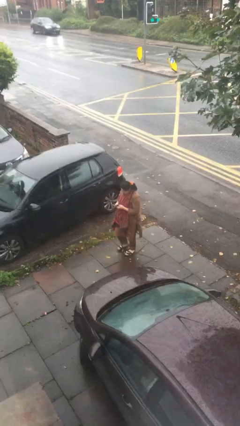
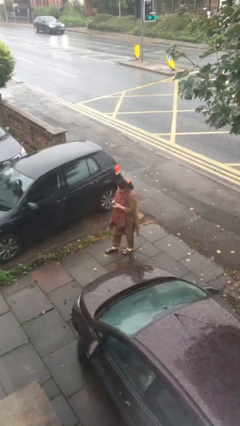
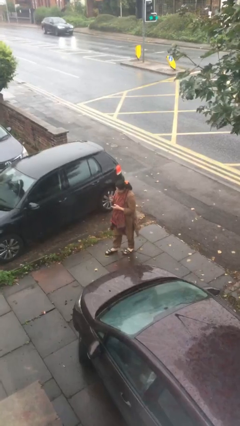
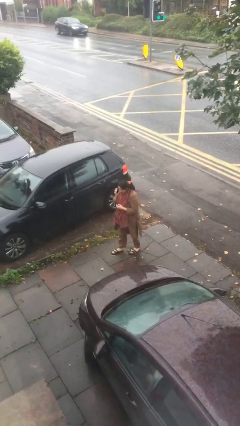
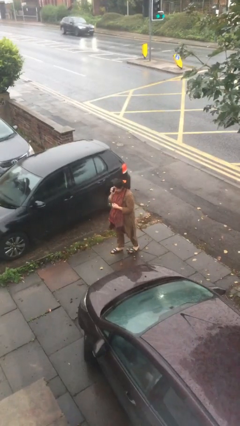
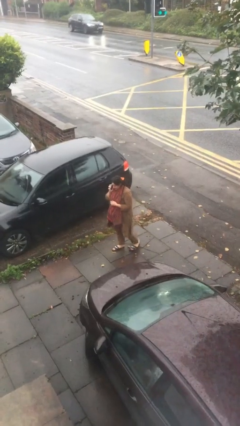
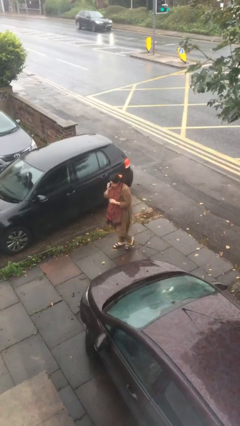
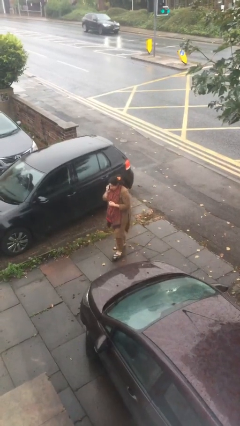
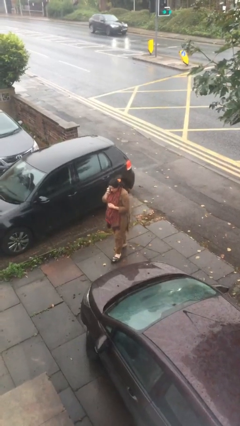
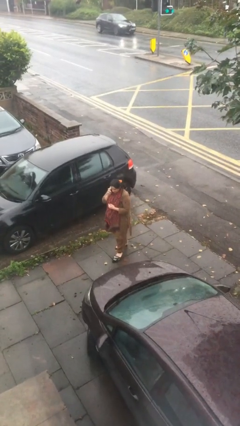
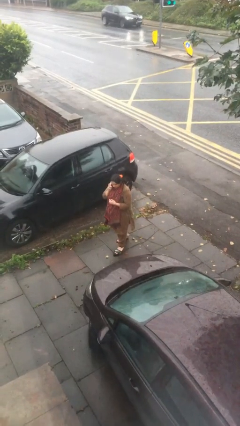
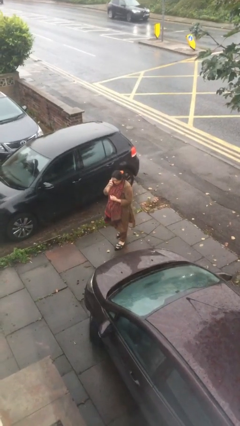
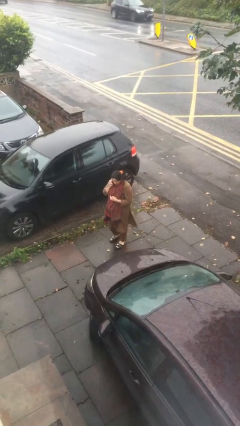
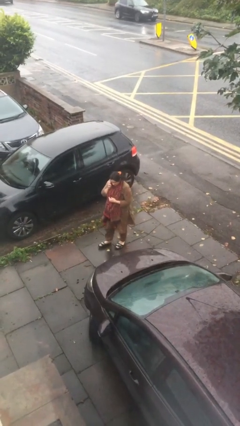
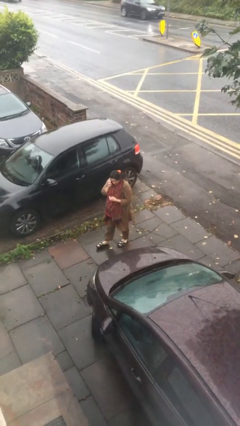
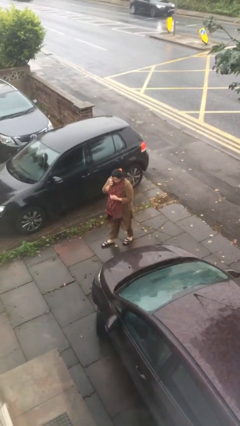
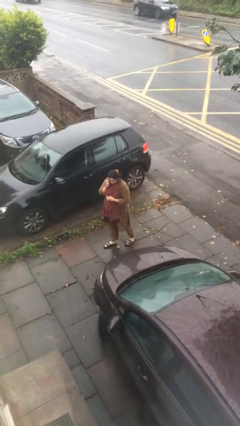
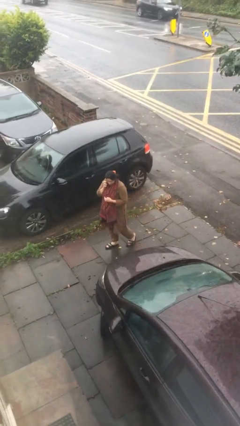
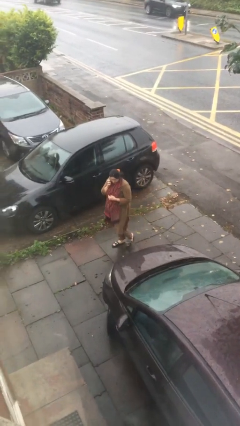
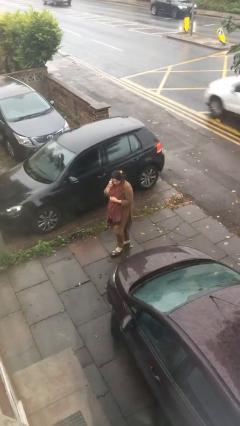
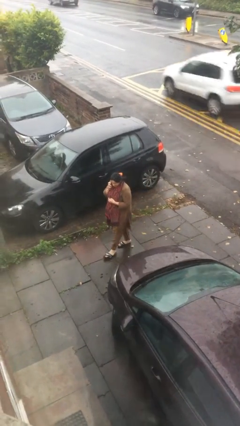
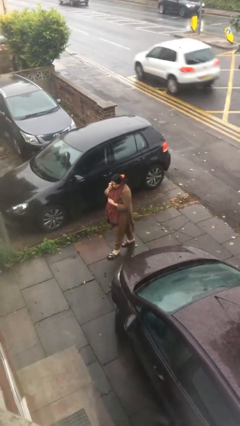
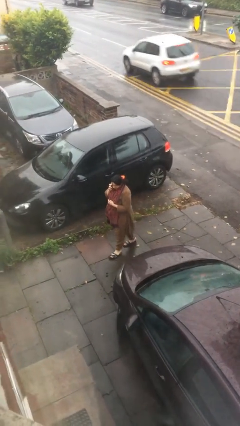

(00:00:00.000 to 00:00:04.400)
person talks on phone

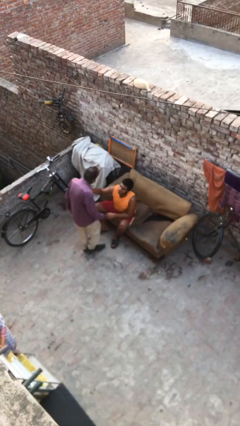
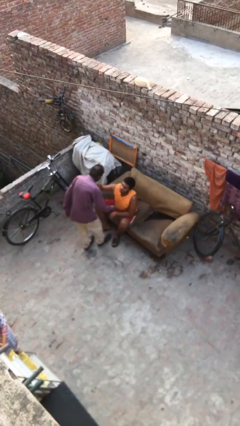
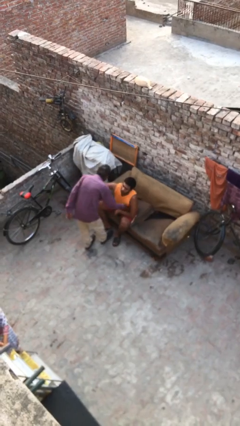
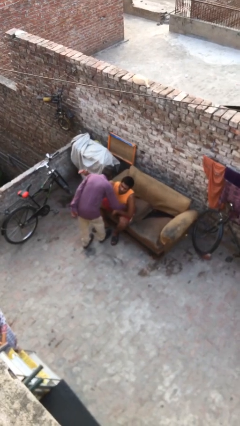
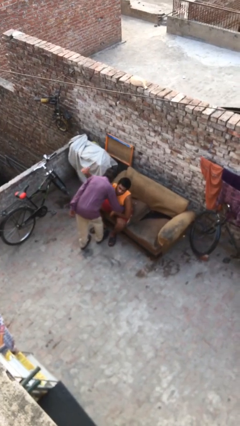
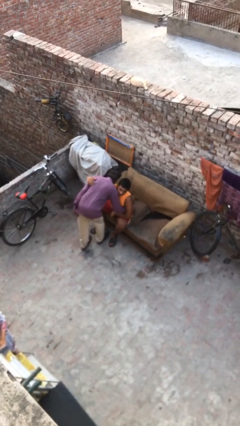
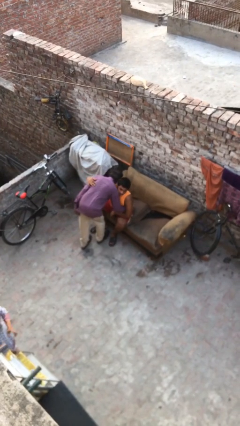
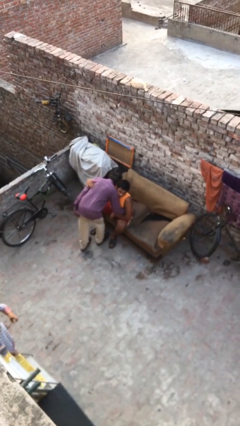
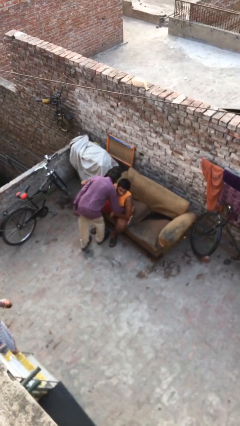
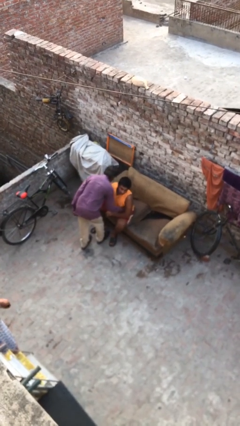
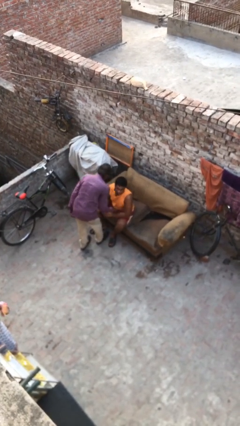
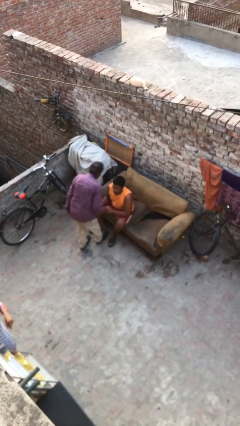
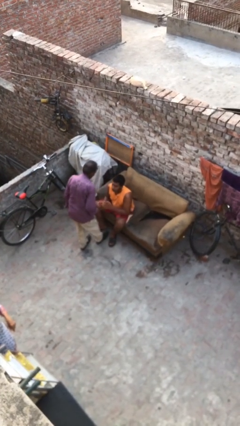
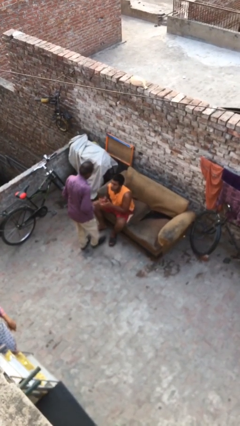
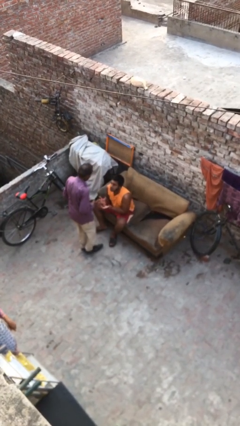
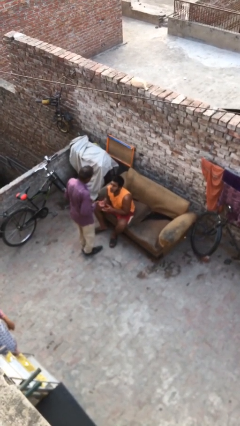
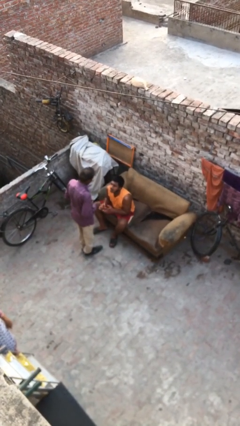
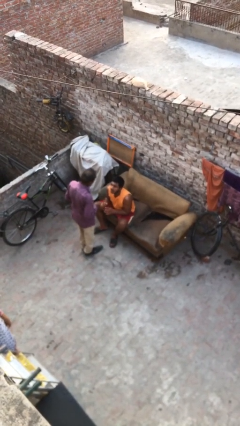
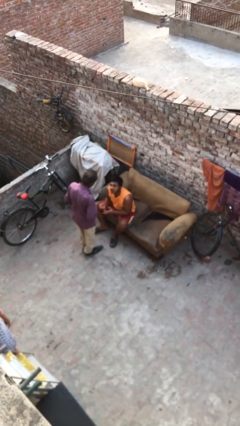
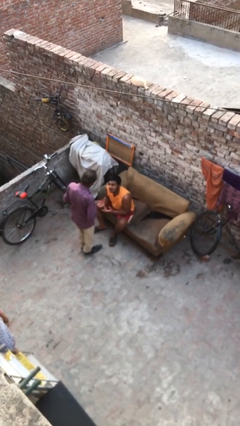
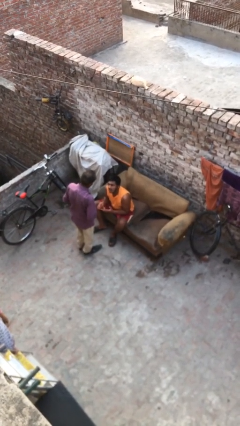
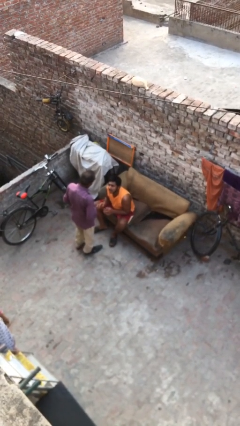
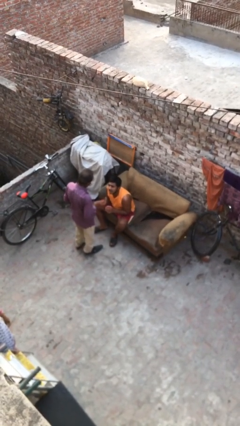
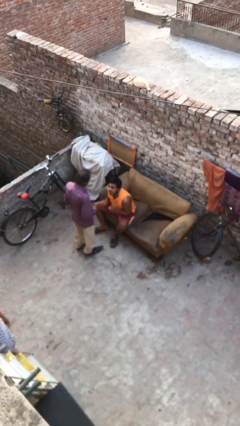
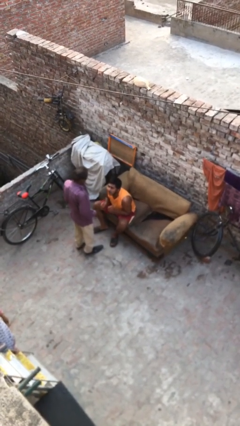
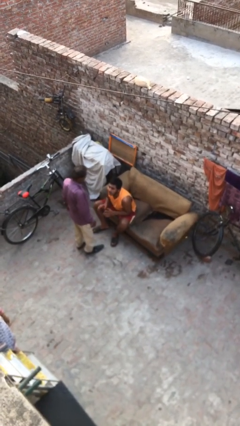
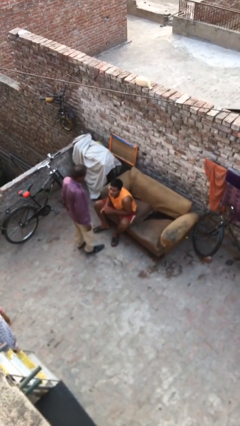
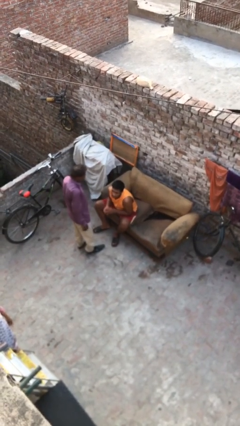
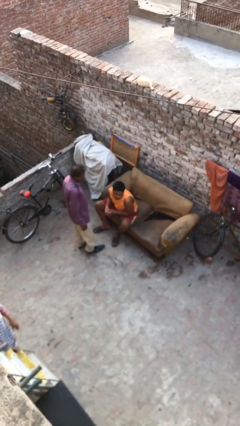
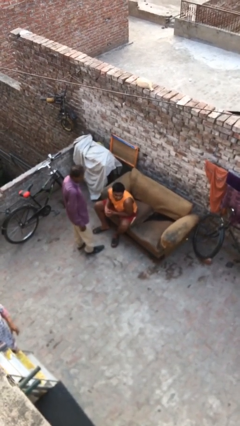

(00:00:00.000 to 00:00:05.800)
person embraces person

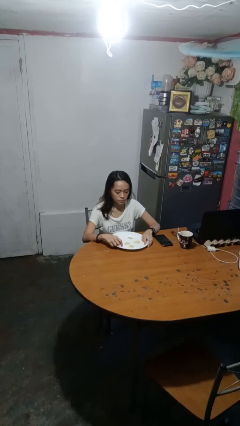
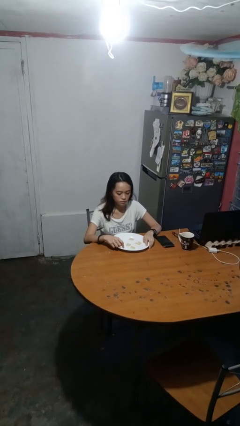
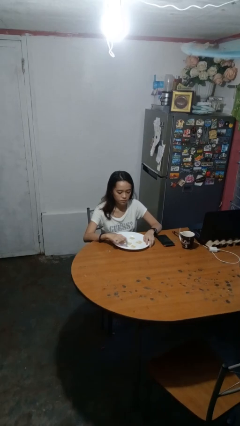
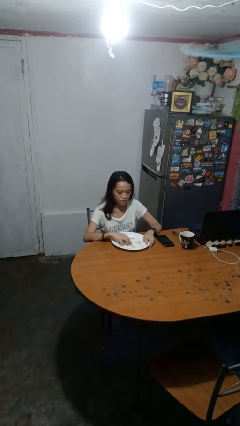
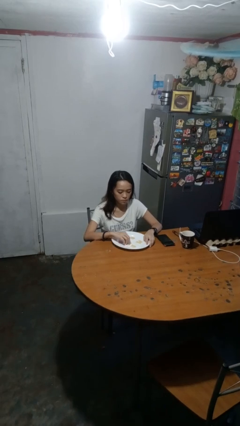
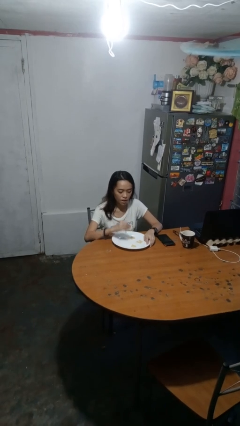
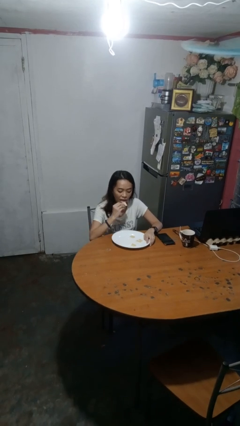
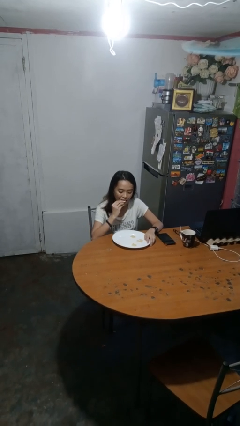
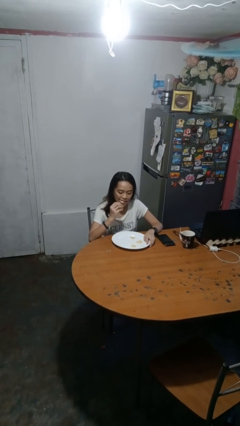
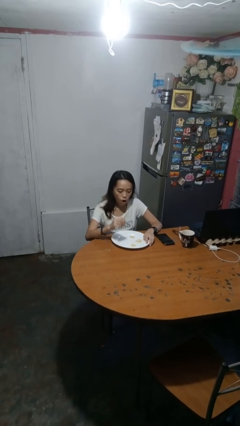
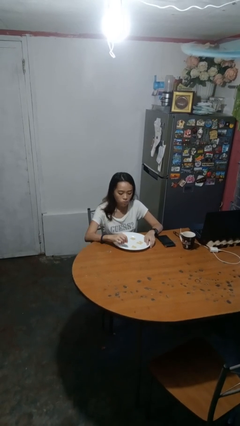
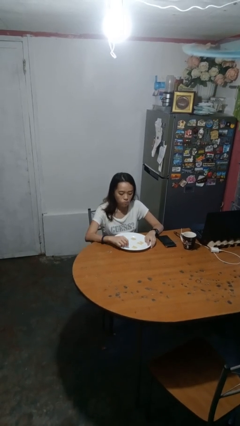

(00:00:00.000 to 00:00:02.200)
person eats with hands

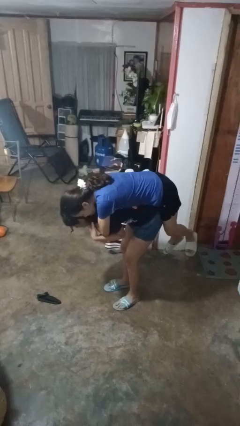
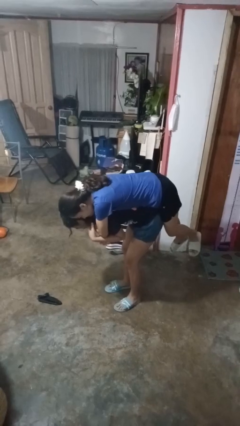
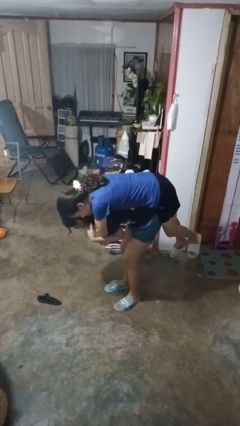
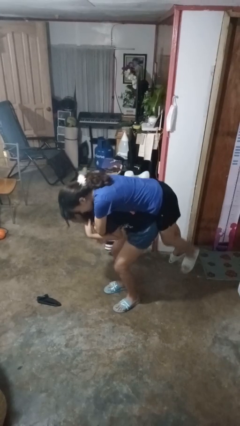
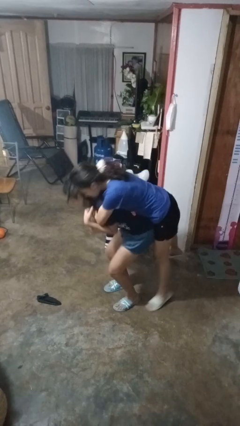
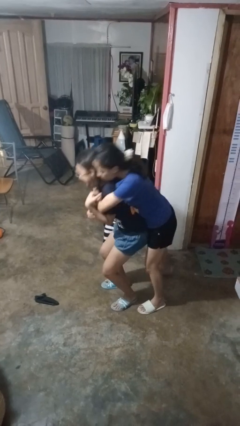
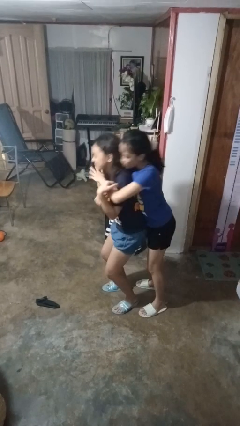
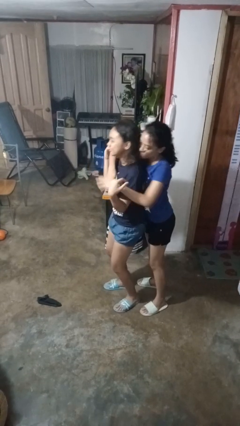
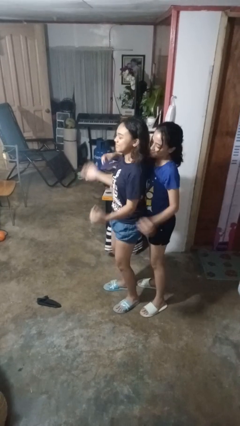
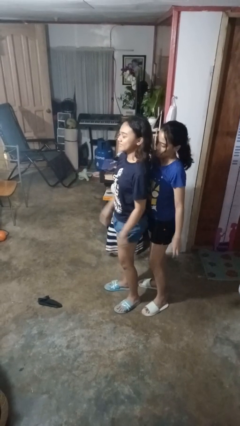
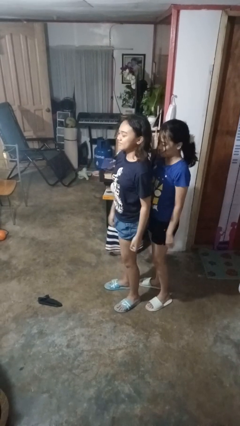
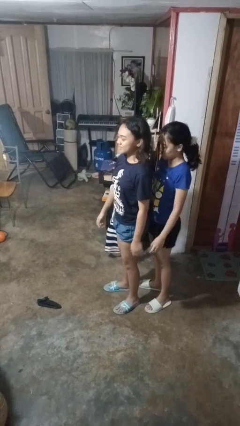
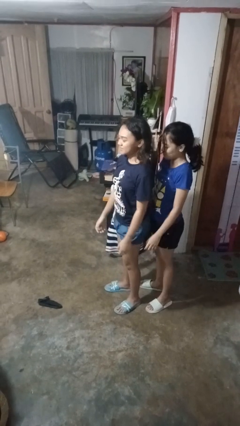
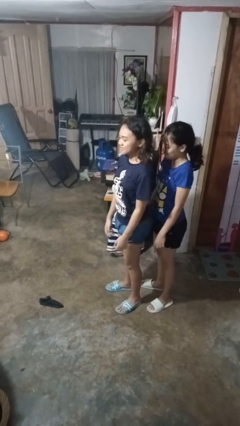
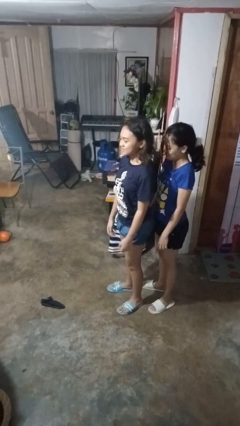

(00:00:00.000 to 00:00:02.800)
person puts down person

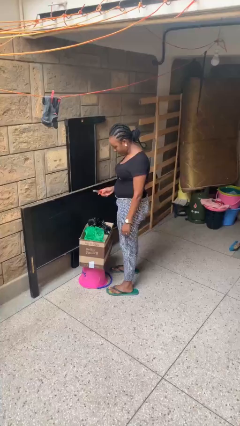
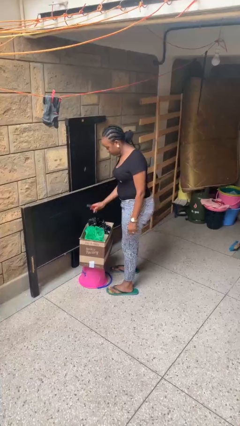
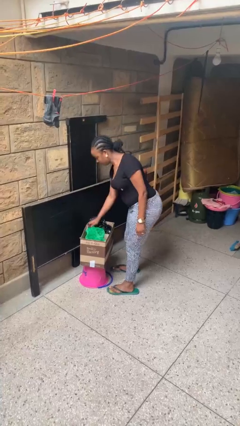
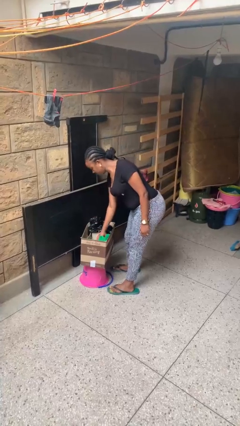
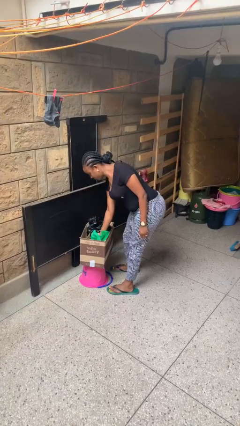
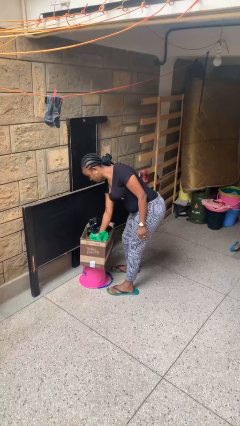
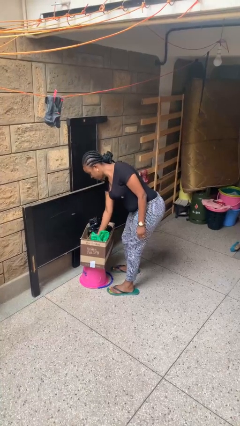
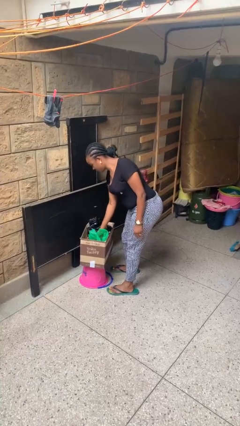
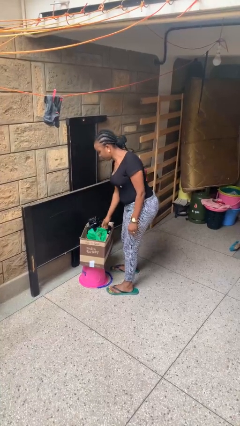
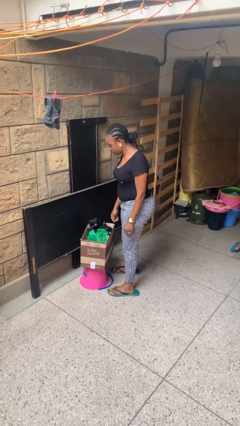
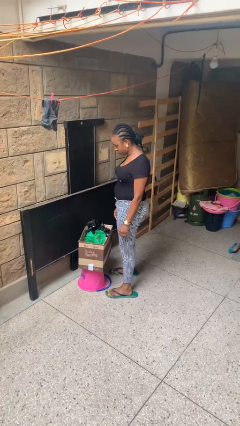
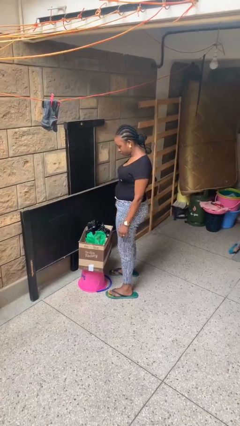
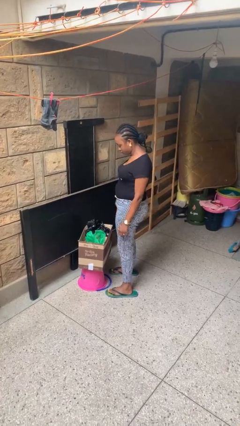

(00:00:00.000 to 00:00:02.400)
person puts object into box
